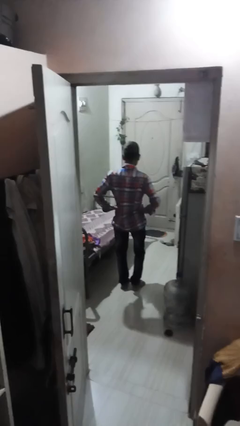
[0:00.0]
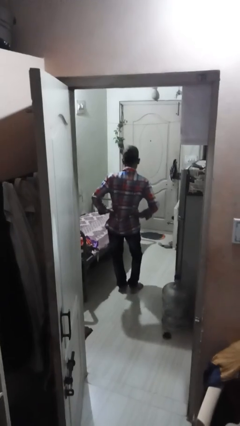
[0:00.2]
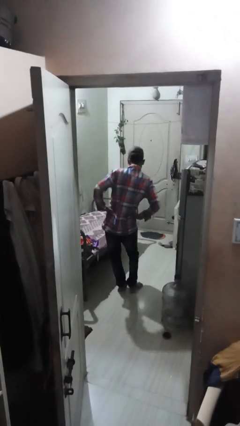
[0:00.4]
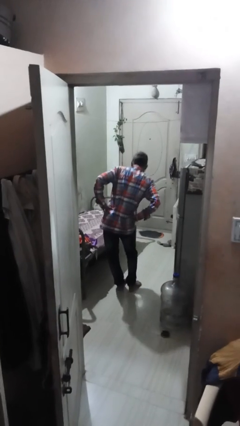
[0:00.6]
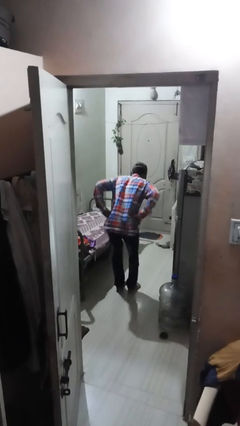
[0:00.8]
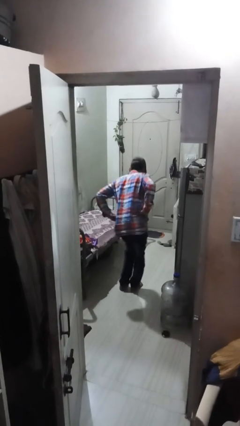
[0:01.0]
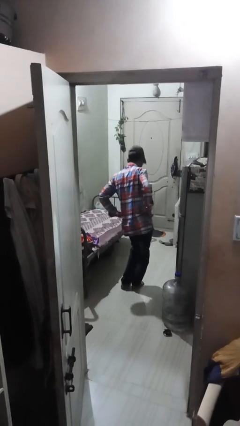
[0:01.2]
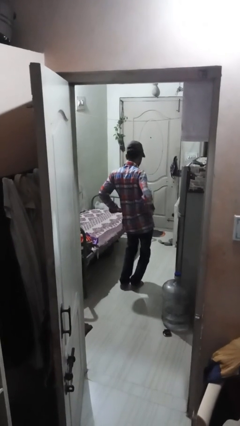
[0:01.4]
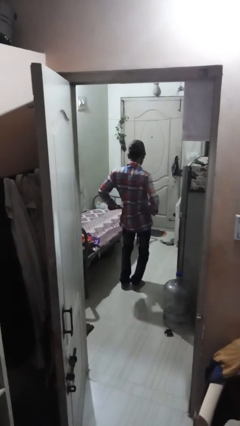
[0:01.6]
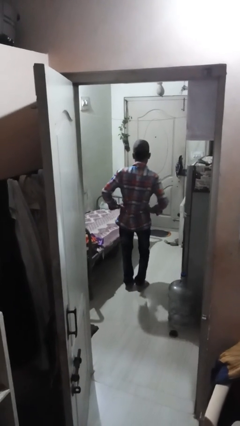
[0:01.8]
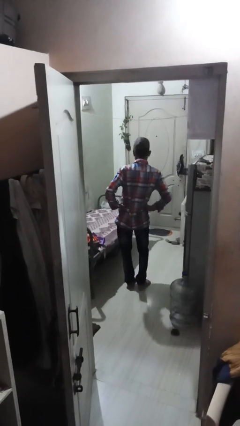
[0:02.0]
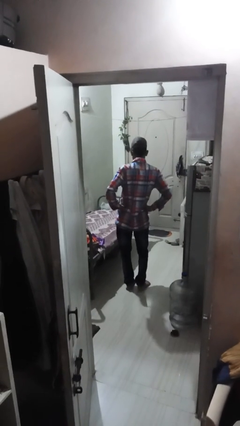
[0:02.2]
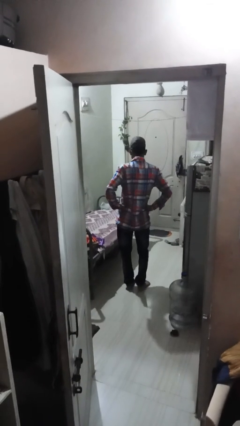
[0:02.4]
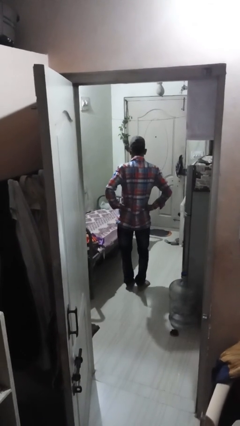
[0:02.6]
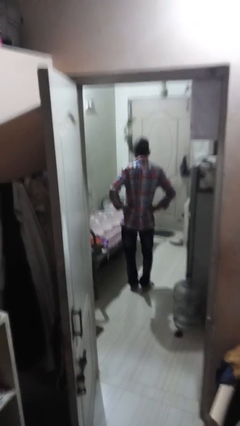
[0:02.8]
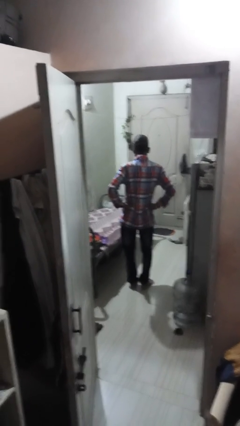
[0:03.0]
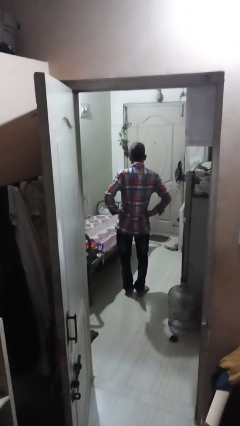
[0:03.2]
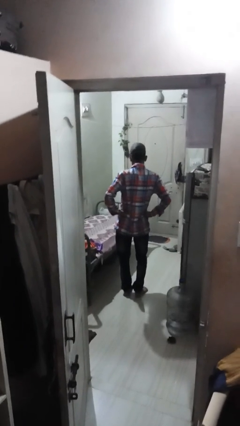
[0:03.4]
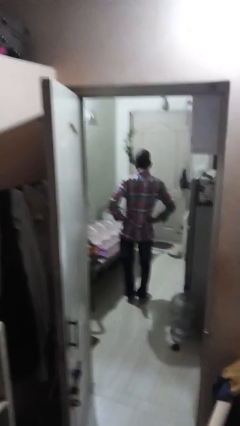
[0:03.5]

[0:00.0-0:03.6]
person wiggles hips

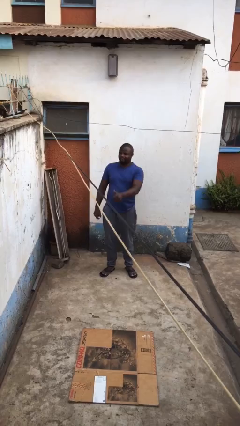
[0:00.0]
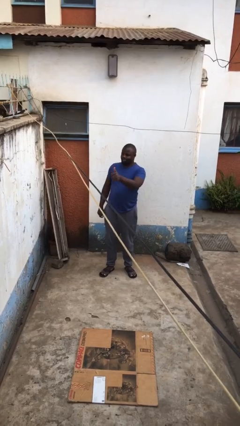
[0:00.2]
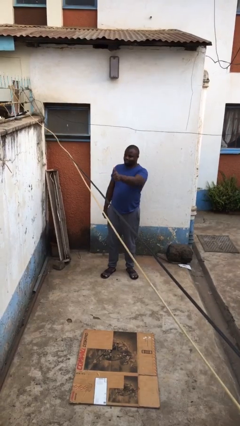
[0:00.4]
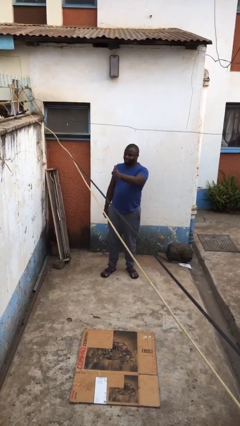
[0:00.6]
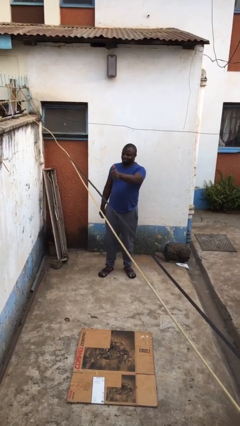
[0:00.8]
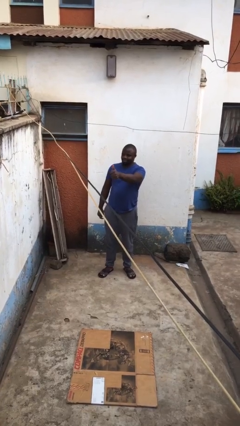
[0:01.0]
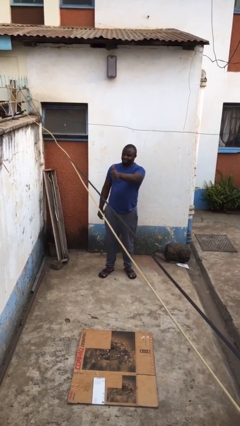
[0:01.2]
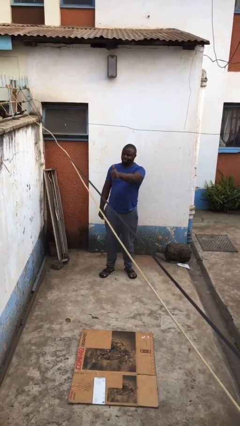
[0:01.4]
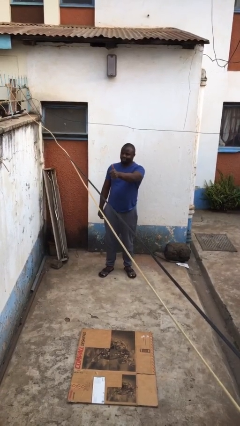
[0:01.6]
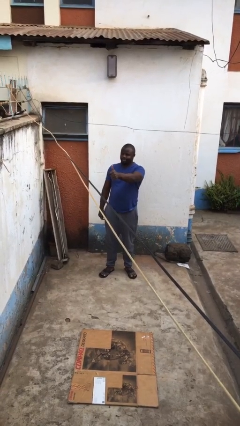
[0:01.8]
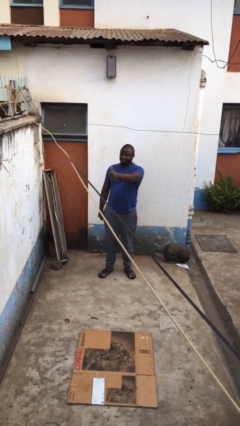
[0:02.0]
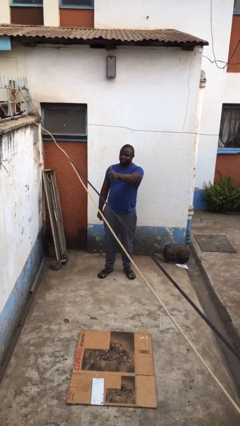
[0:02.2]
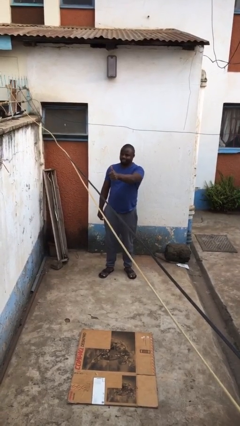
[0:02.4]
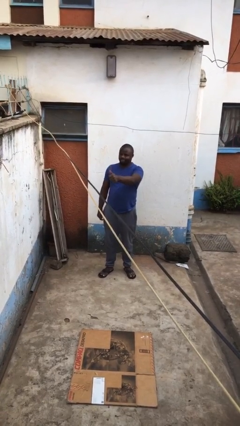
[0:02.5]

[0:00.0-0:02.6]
person gestures thumbs up

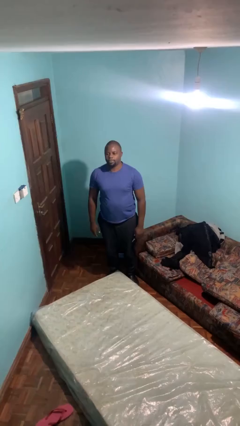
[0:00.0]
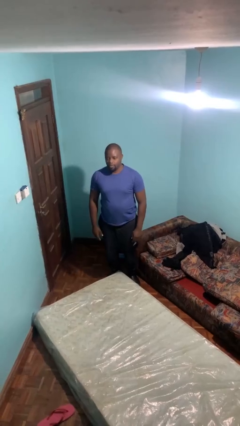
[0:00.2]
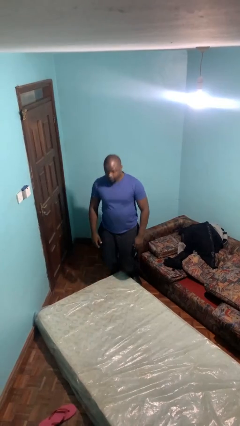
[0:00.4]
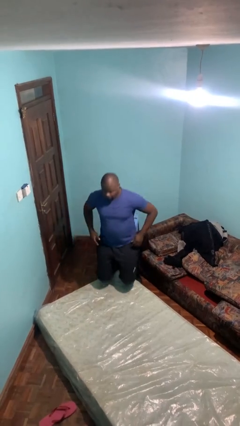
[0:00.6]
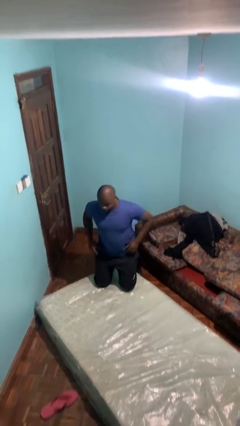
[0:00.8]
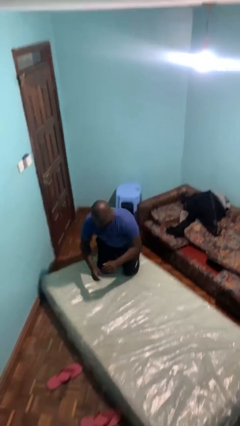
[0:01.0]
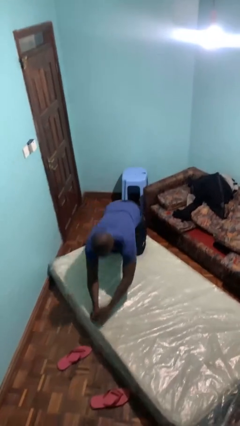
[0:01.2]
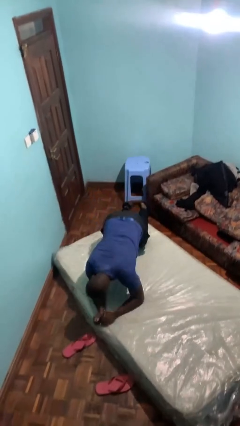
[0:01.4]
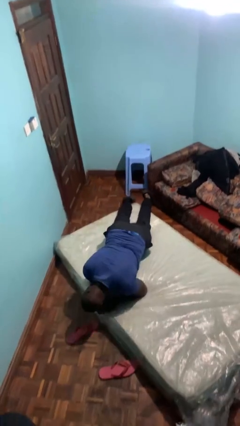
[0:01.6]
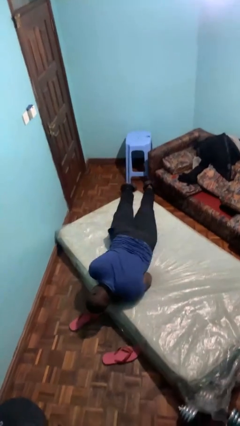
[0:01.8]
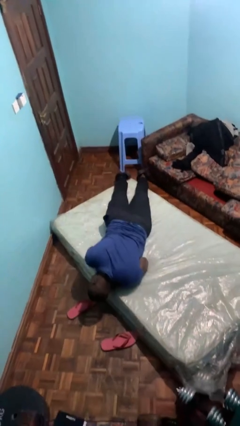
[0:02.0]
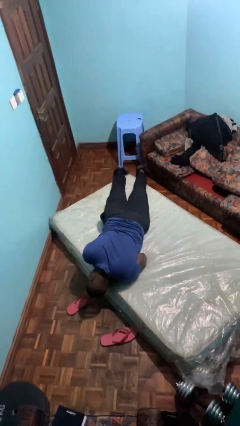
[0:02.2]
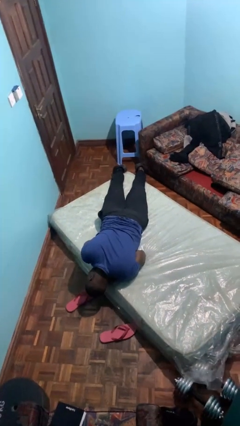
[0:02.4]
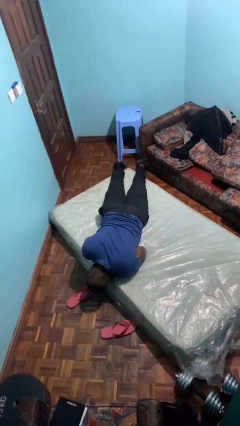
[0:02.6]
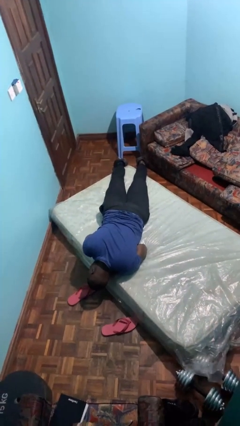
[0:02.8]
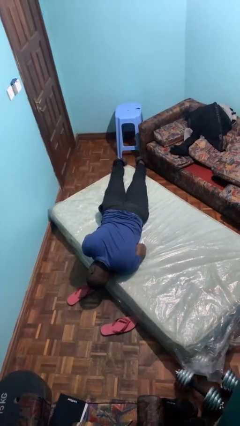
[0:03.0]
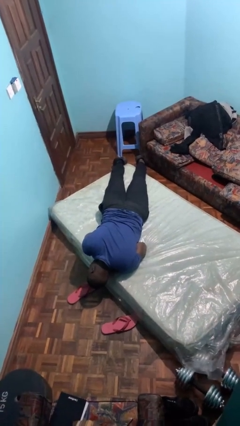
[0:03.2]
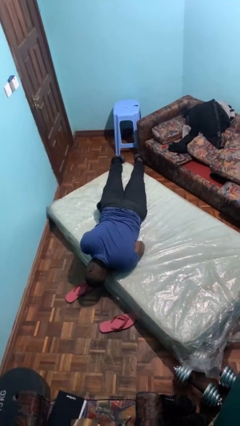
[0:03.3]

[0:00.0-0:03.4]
person lies down on bed

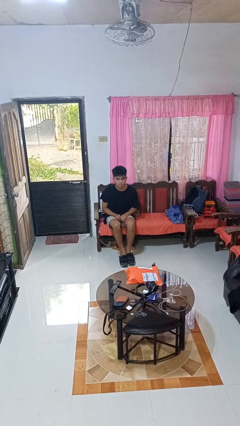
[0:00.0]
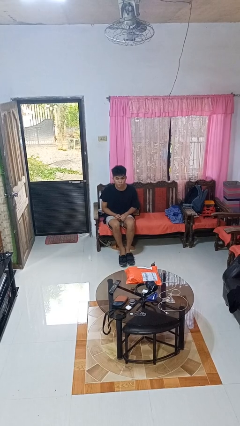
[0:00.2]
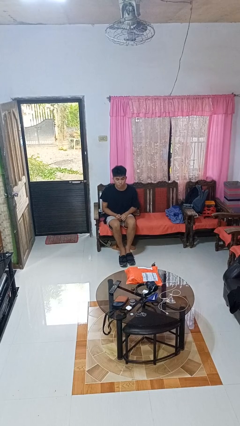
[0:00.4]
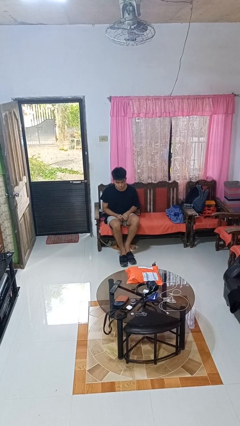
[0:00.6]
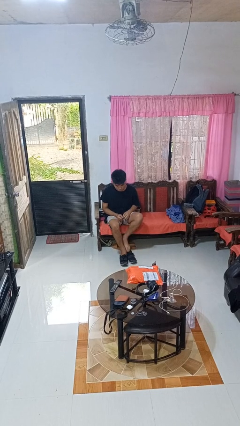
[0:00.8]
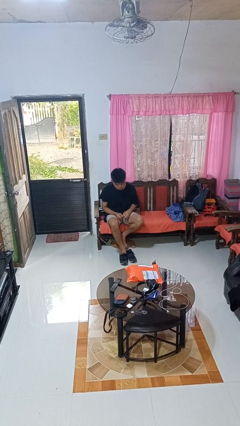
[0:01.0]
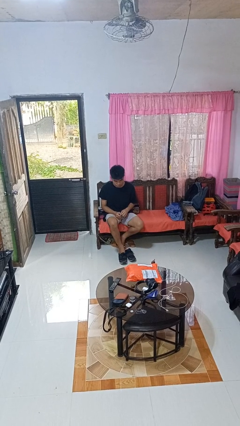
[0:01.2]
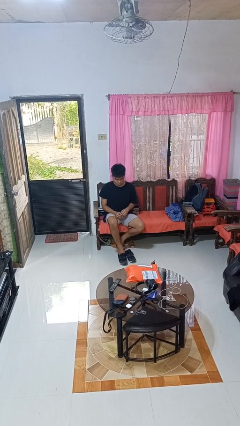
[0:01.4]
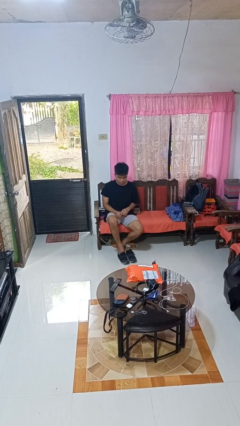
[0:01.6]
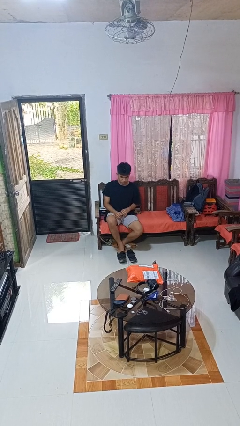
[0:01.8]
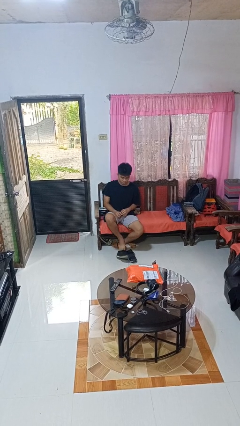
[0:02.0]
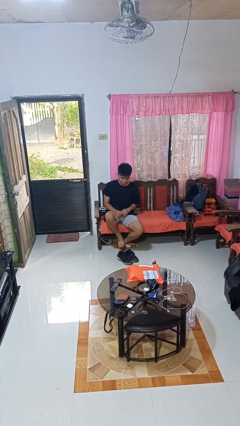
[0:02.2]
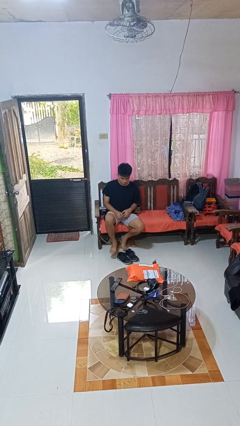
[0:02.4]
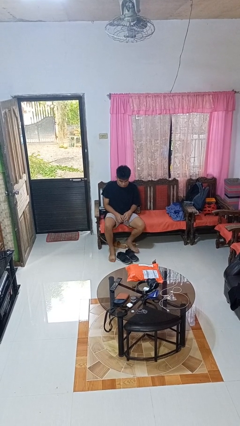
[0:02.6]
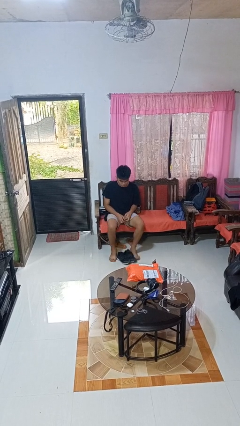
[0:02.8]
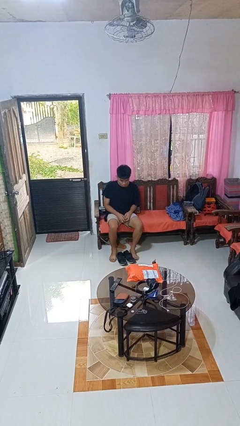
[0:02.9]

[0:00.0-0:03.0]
person takes off shoes

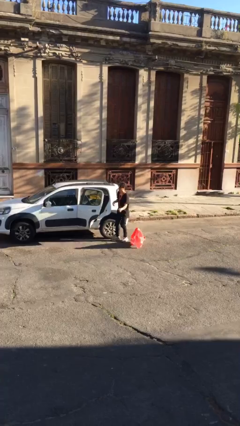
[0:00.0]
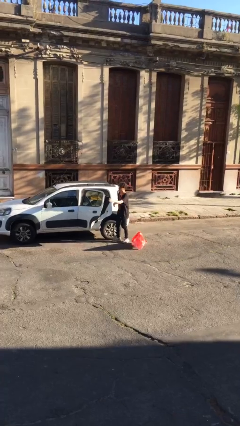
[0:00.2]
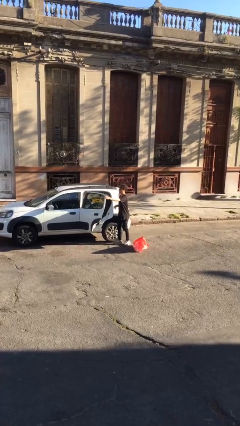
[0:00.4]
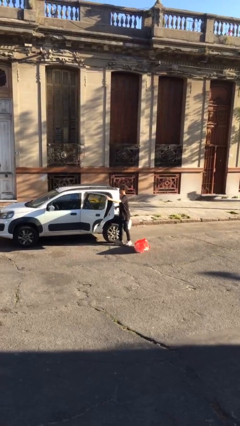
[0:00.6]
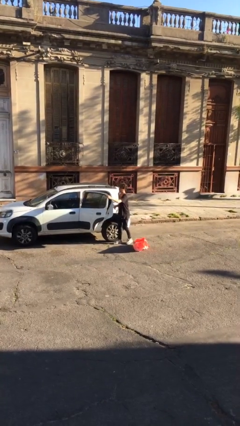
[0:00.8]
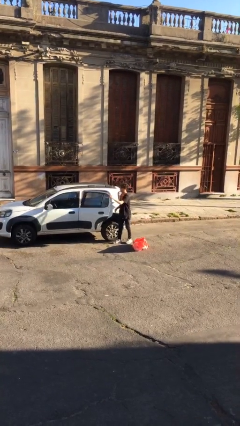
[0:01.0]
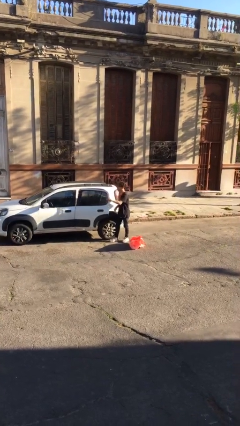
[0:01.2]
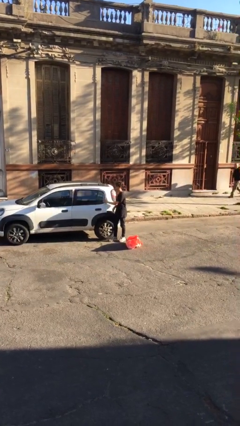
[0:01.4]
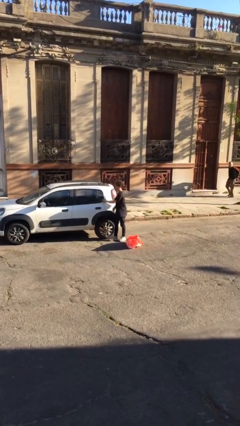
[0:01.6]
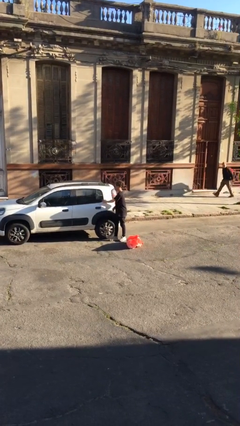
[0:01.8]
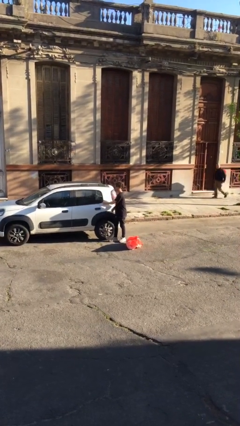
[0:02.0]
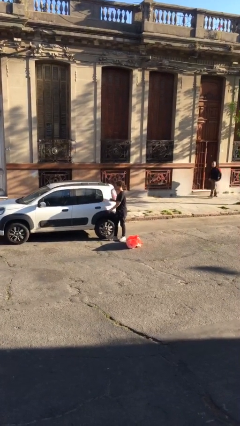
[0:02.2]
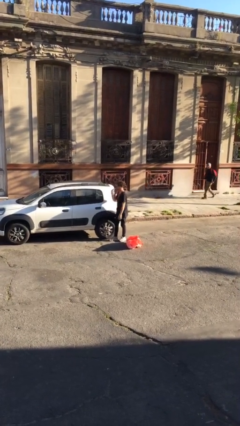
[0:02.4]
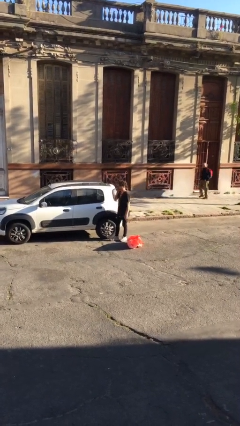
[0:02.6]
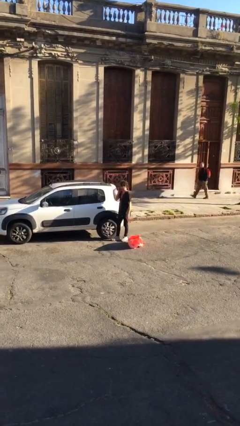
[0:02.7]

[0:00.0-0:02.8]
person closes car door

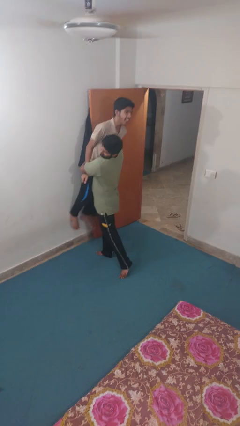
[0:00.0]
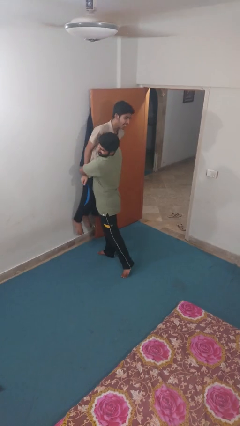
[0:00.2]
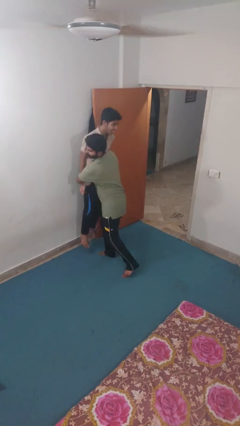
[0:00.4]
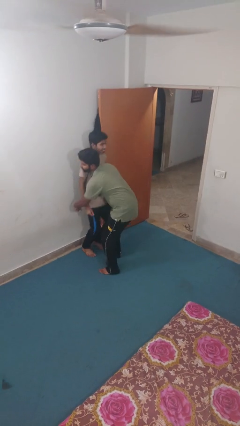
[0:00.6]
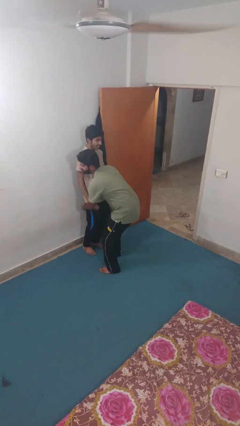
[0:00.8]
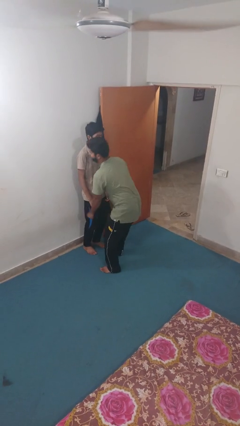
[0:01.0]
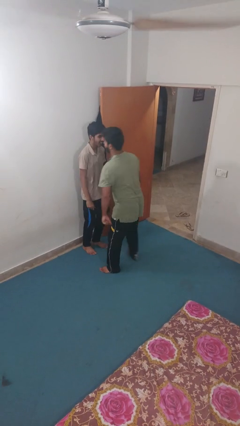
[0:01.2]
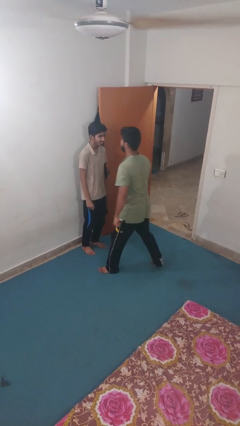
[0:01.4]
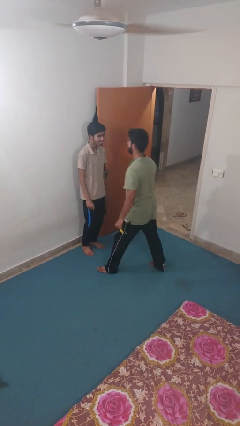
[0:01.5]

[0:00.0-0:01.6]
person puts down person

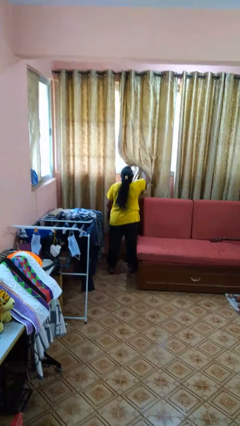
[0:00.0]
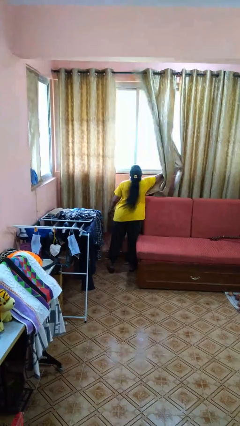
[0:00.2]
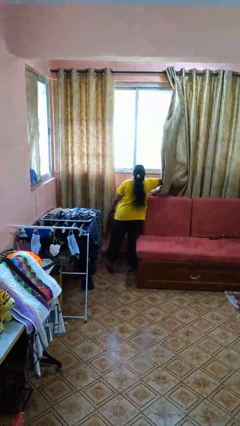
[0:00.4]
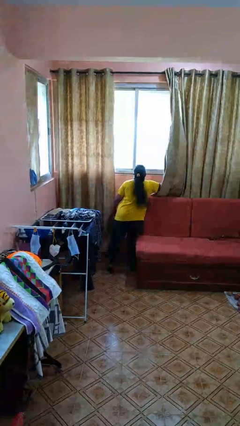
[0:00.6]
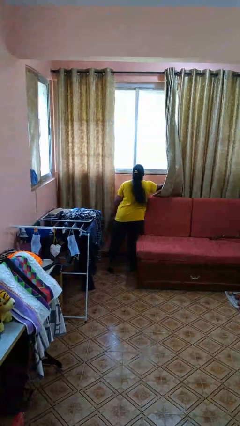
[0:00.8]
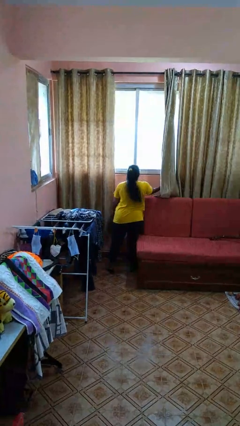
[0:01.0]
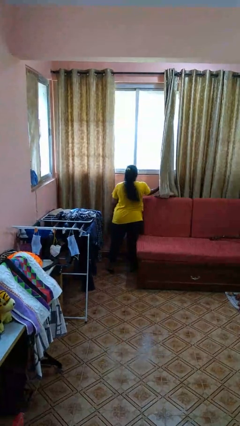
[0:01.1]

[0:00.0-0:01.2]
person opens curtains
